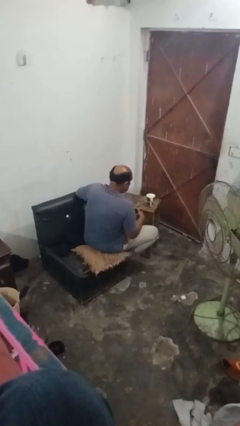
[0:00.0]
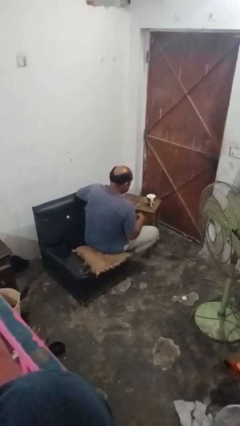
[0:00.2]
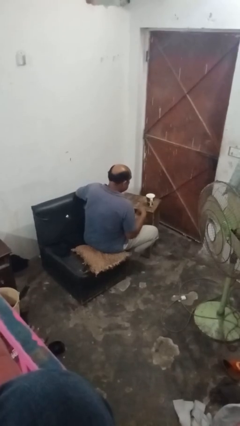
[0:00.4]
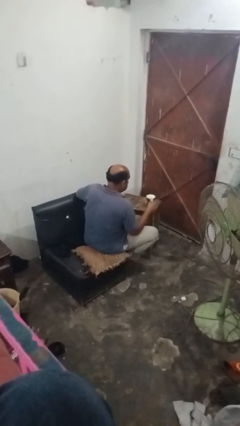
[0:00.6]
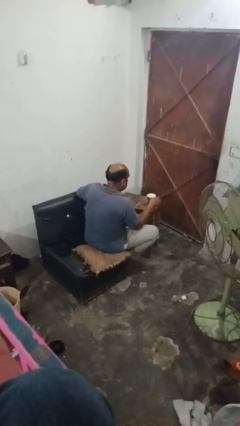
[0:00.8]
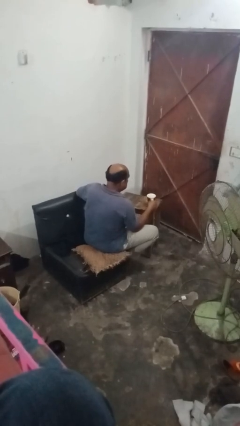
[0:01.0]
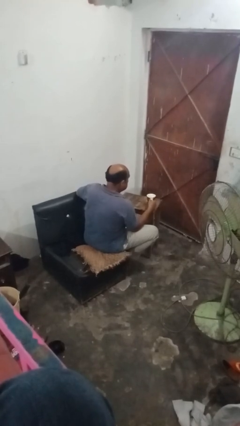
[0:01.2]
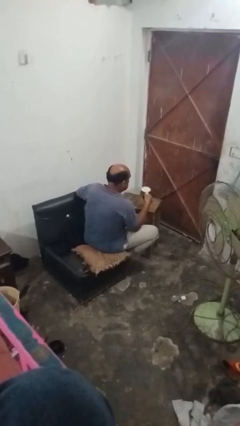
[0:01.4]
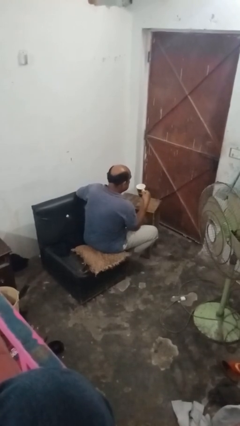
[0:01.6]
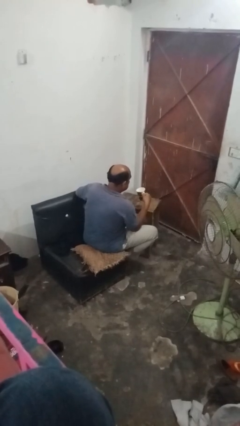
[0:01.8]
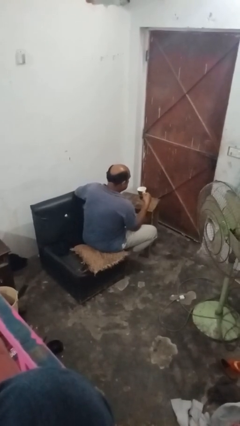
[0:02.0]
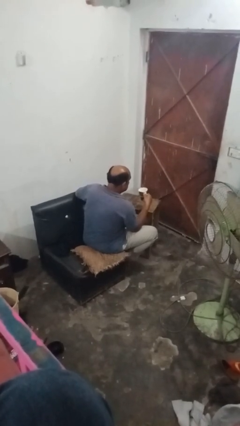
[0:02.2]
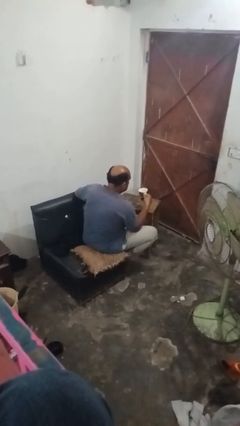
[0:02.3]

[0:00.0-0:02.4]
person picks up object from table

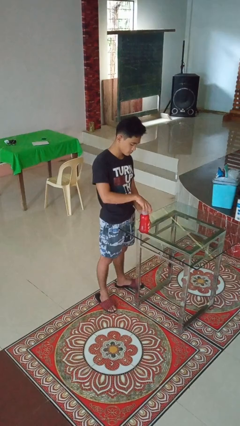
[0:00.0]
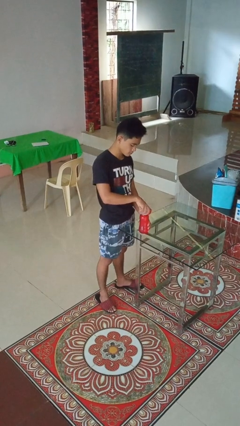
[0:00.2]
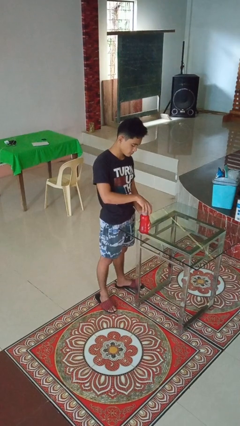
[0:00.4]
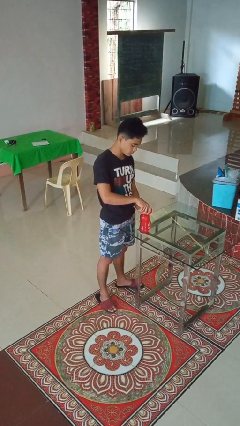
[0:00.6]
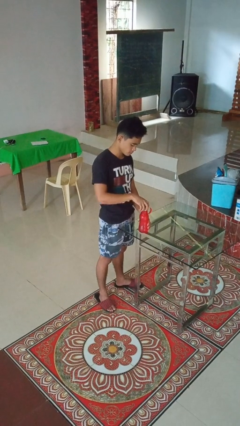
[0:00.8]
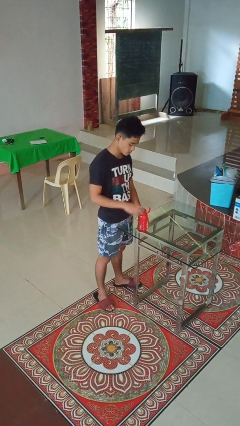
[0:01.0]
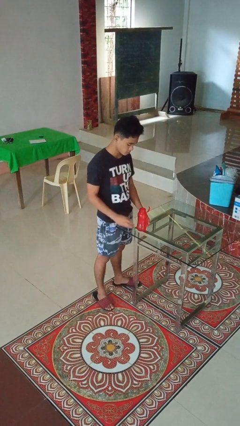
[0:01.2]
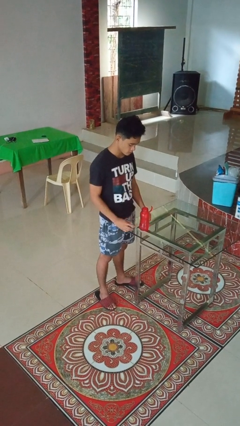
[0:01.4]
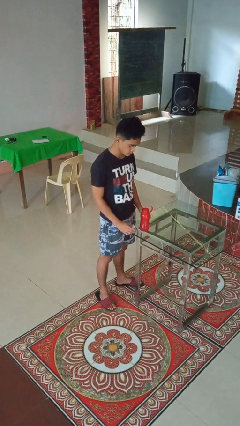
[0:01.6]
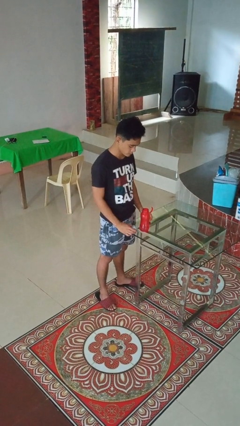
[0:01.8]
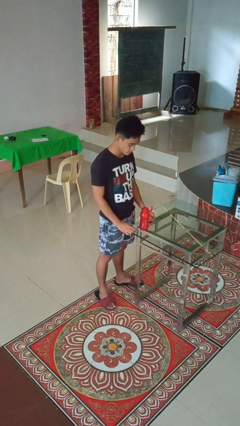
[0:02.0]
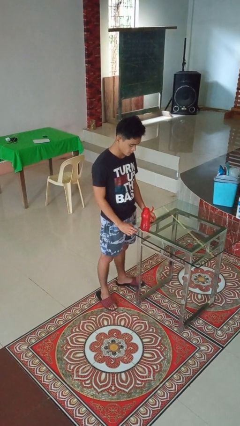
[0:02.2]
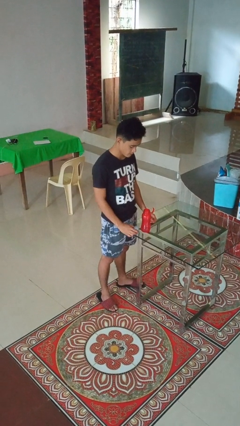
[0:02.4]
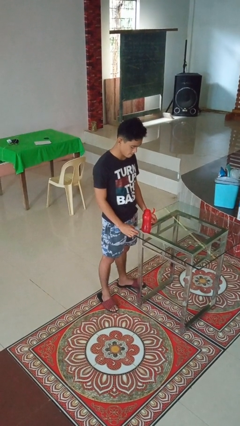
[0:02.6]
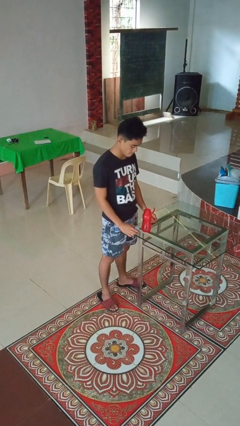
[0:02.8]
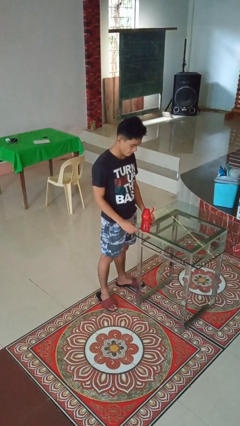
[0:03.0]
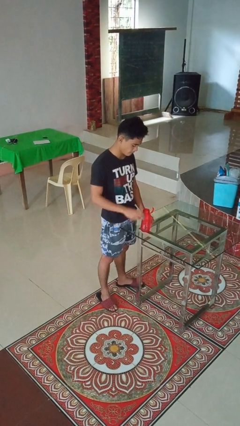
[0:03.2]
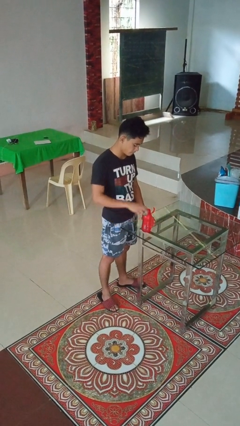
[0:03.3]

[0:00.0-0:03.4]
person unscrews lid from bottle

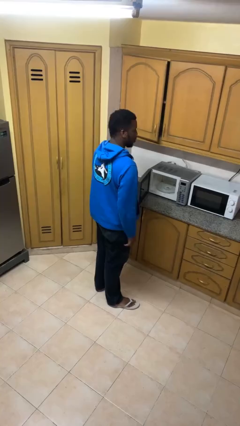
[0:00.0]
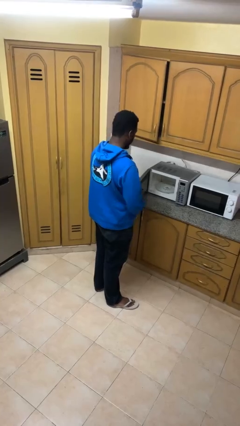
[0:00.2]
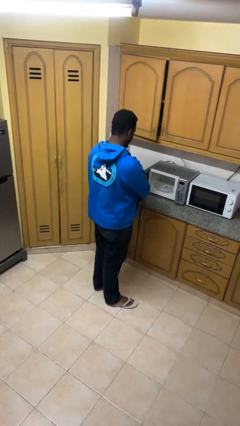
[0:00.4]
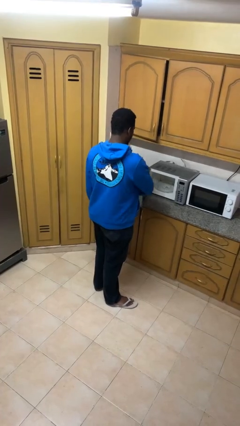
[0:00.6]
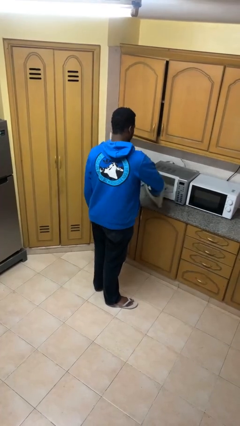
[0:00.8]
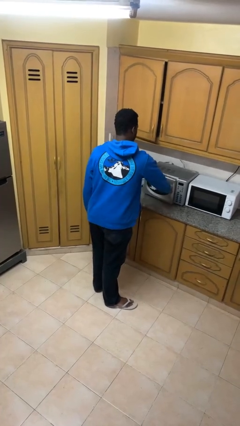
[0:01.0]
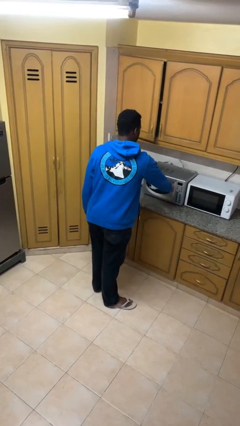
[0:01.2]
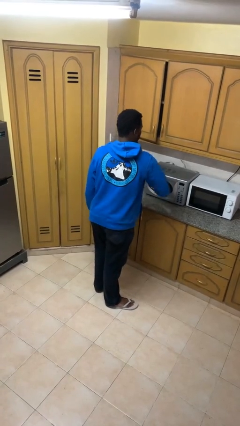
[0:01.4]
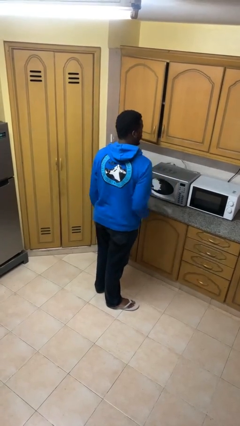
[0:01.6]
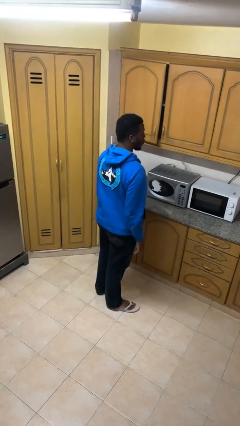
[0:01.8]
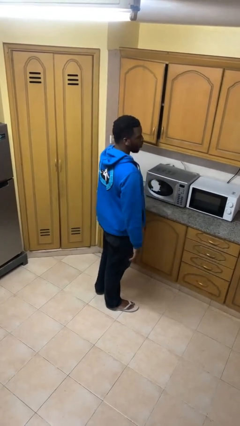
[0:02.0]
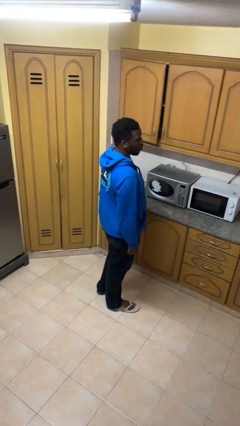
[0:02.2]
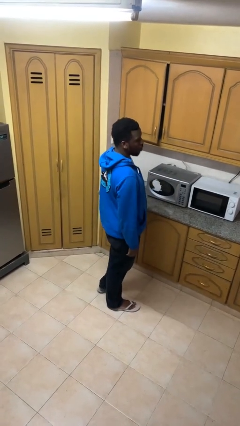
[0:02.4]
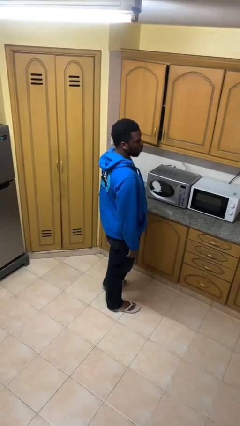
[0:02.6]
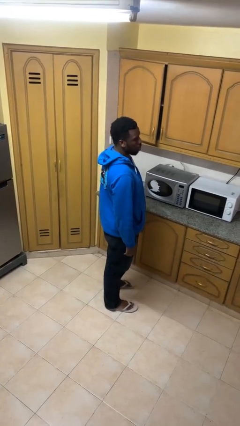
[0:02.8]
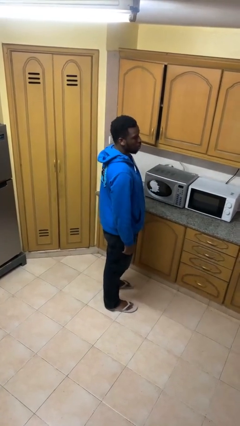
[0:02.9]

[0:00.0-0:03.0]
person closes microwave

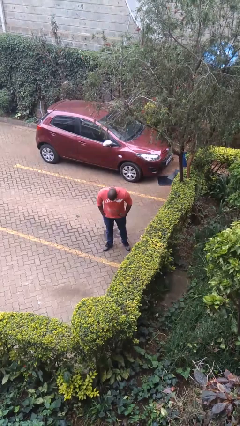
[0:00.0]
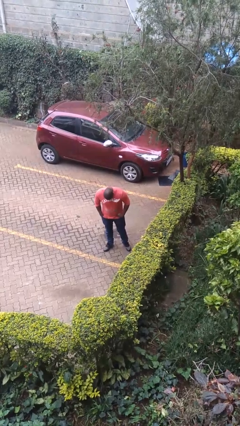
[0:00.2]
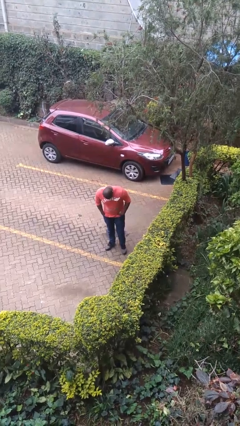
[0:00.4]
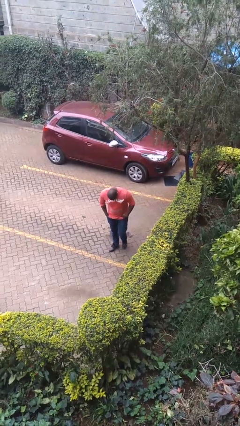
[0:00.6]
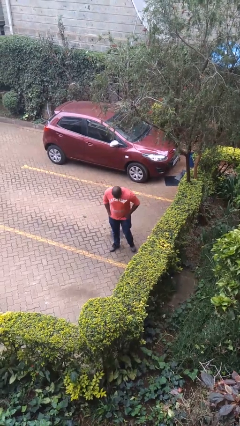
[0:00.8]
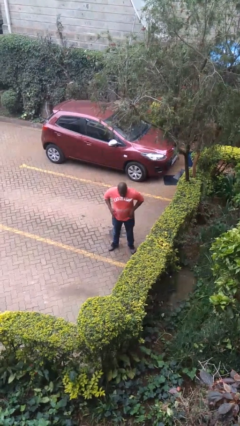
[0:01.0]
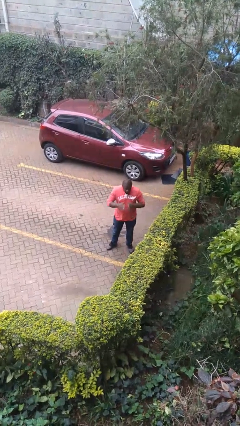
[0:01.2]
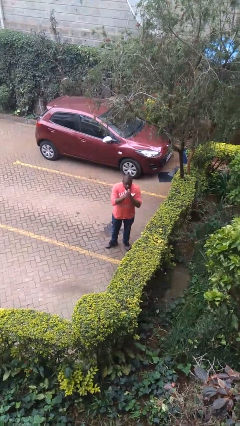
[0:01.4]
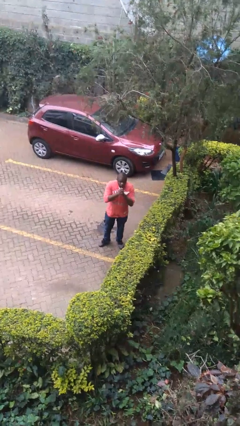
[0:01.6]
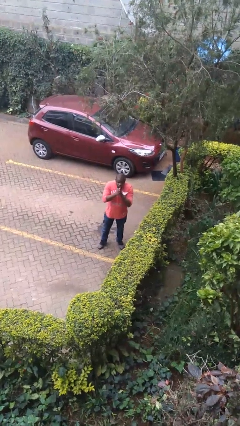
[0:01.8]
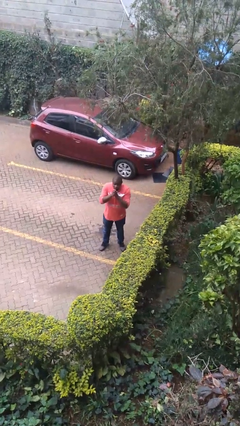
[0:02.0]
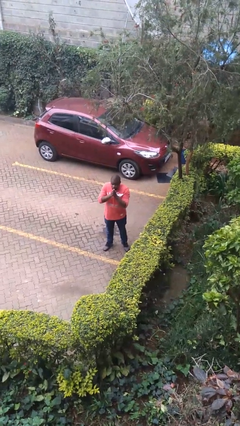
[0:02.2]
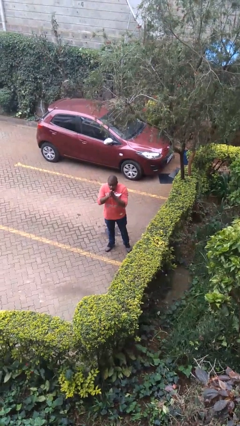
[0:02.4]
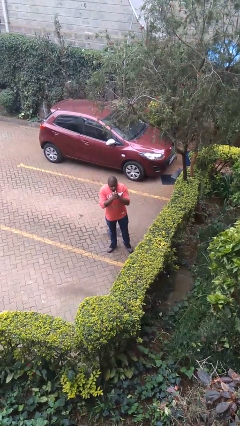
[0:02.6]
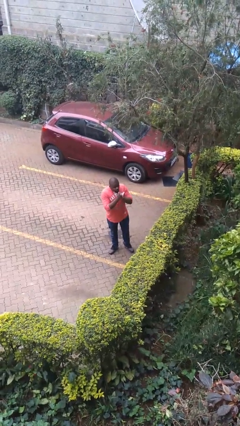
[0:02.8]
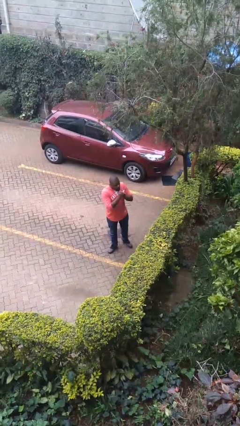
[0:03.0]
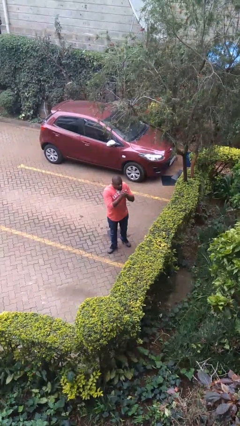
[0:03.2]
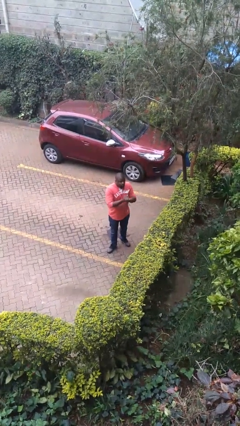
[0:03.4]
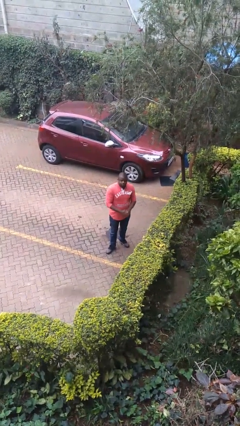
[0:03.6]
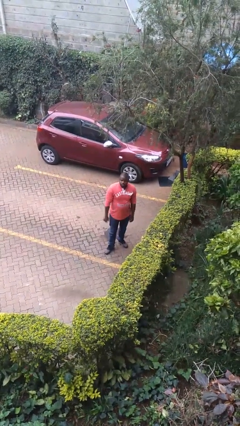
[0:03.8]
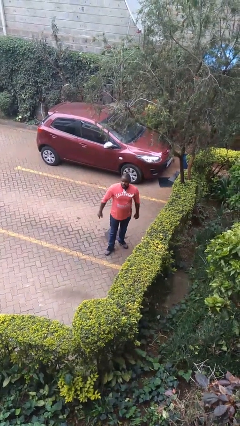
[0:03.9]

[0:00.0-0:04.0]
person blows into hands

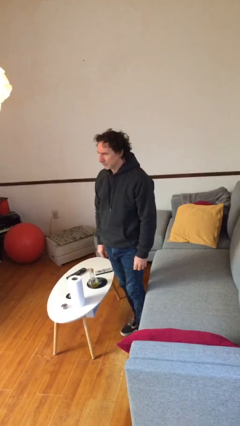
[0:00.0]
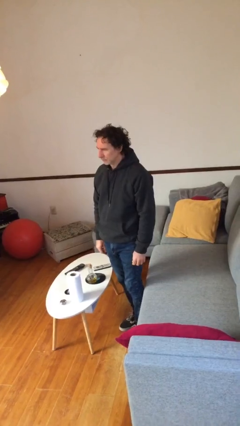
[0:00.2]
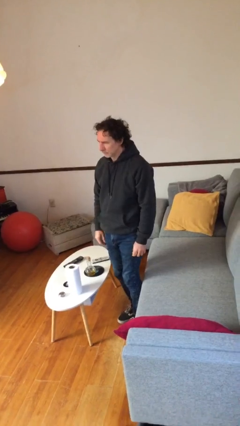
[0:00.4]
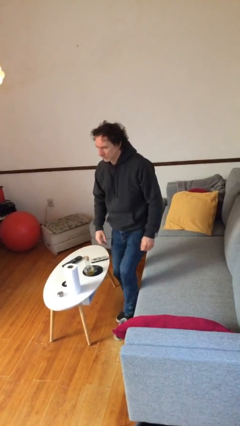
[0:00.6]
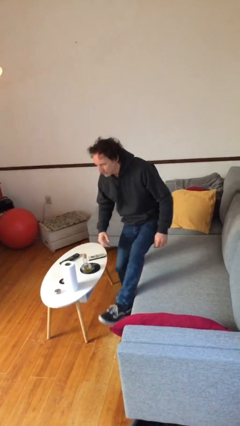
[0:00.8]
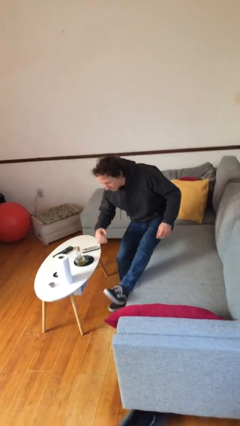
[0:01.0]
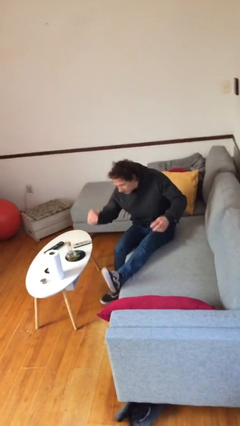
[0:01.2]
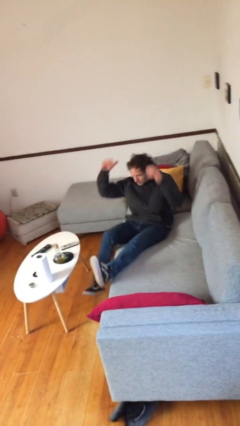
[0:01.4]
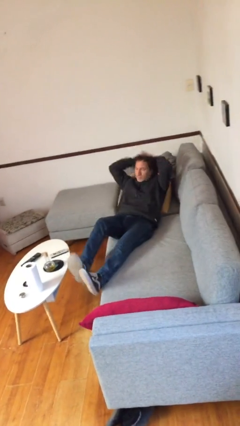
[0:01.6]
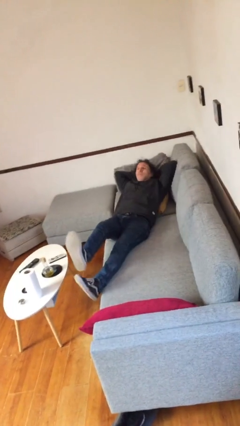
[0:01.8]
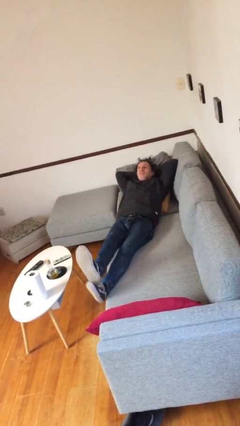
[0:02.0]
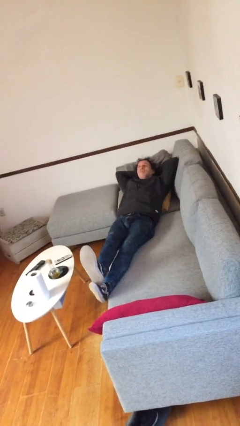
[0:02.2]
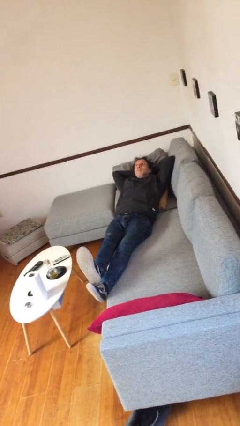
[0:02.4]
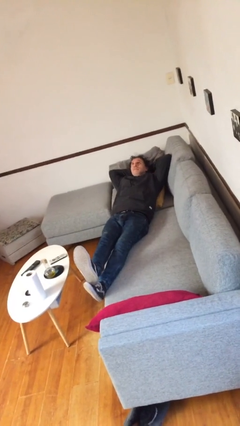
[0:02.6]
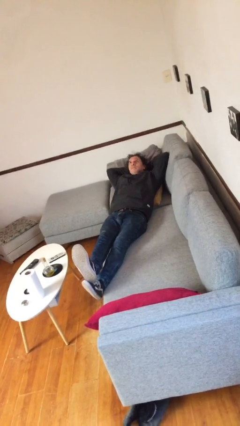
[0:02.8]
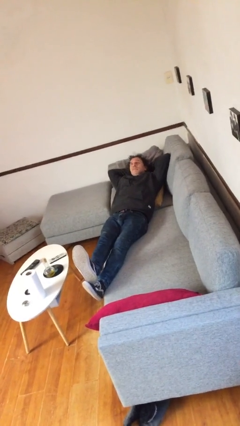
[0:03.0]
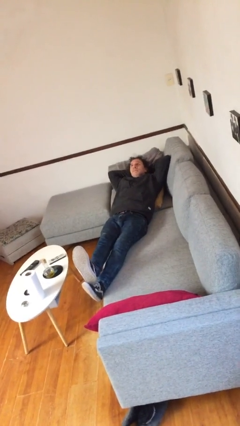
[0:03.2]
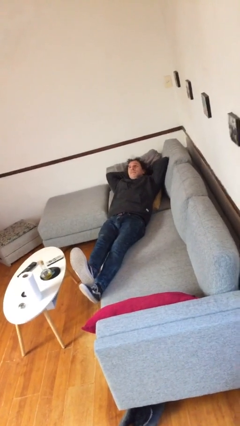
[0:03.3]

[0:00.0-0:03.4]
person lies down on couch

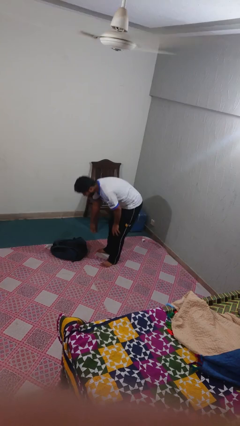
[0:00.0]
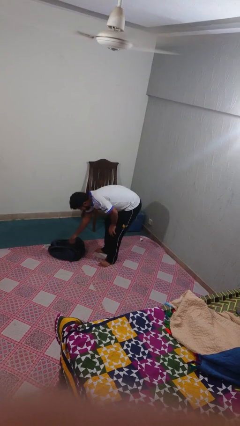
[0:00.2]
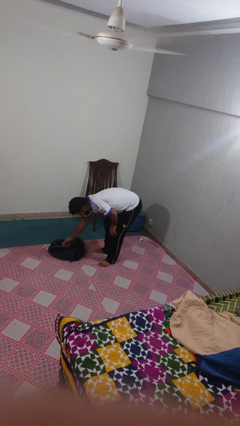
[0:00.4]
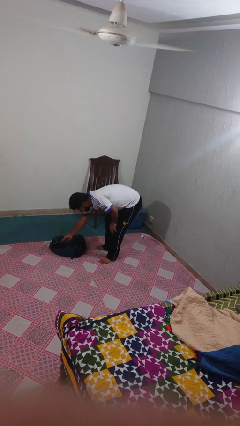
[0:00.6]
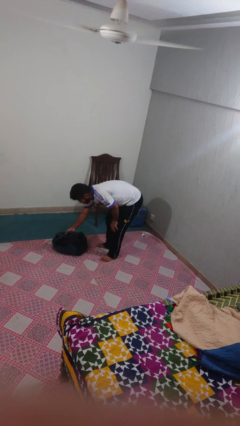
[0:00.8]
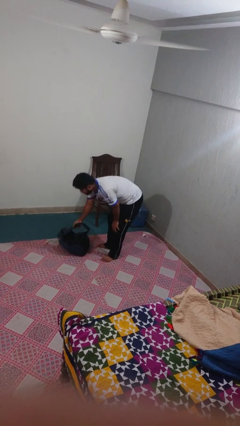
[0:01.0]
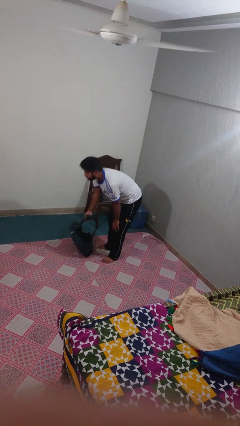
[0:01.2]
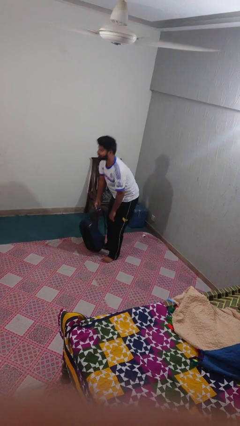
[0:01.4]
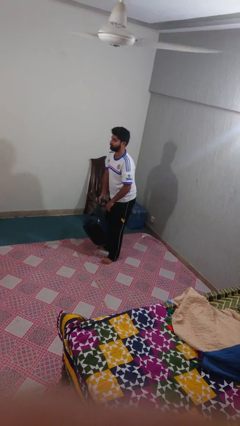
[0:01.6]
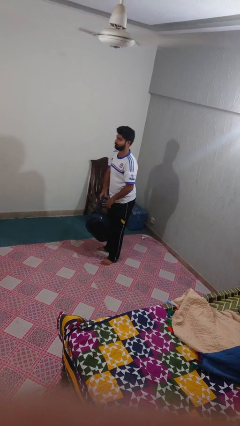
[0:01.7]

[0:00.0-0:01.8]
person picks up object from floor
